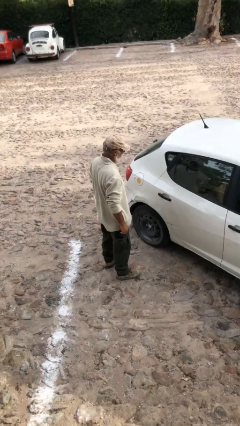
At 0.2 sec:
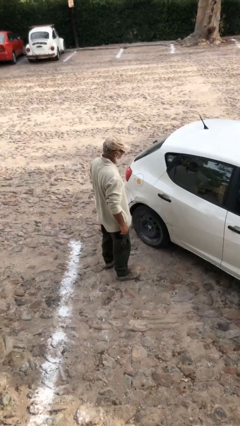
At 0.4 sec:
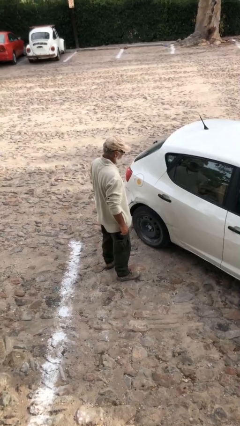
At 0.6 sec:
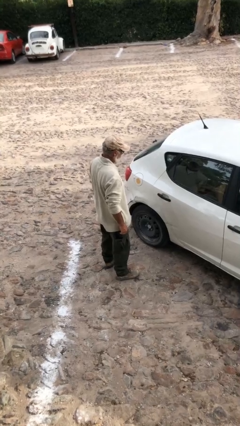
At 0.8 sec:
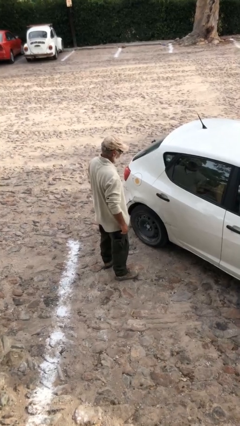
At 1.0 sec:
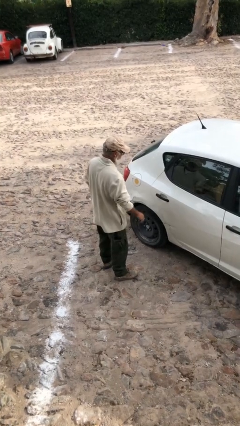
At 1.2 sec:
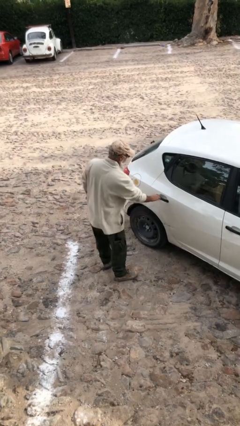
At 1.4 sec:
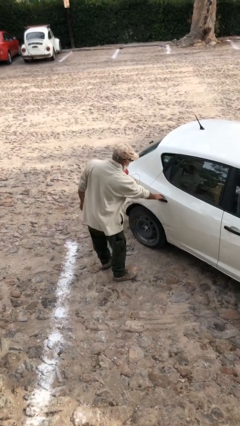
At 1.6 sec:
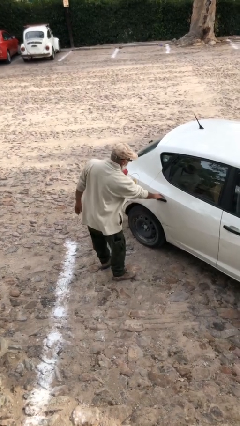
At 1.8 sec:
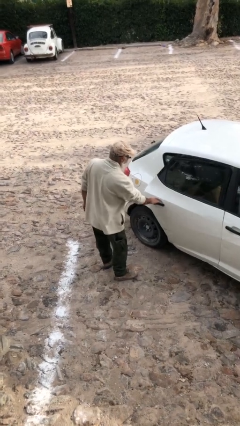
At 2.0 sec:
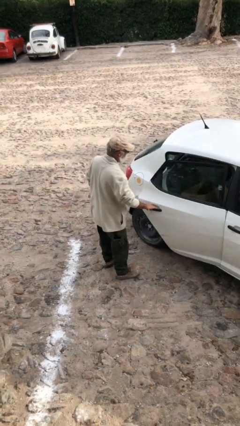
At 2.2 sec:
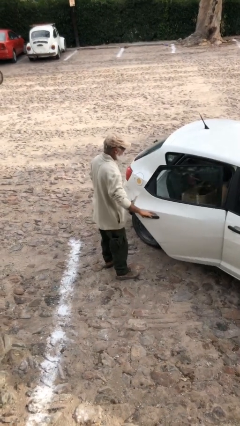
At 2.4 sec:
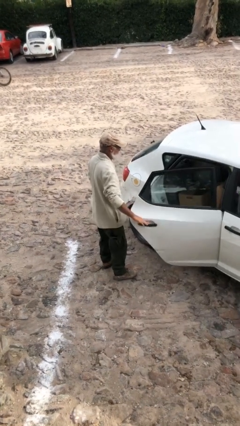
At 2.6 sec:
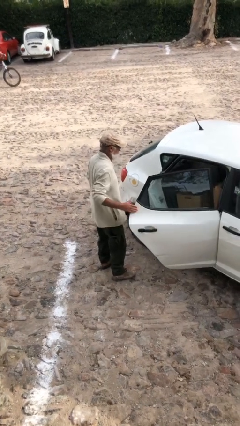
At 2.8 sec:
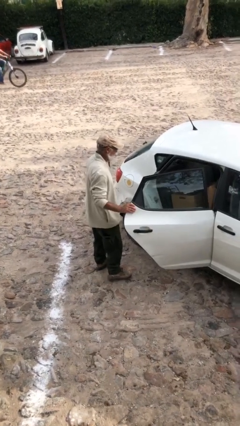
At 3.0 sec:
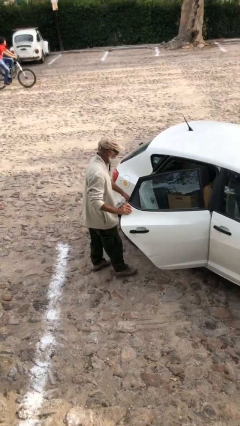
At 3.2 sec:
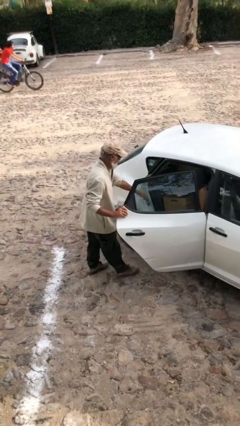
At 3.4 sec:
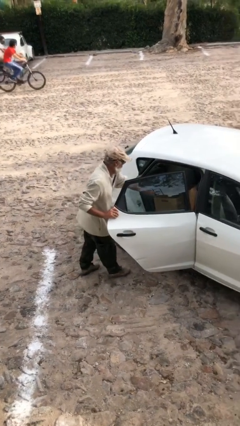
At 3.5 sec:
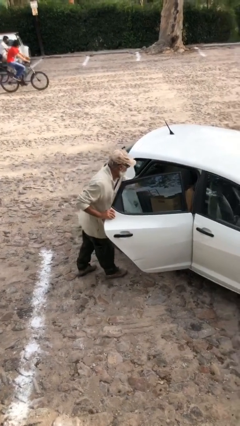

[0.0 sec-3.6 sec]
person opens car door

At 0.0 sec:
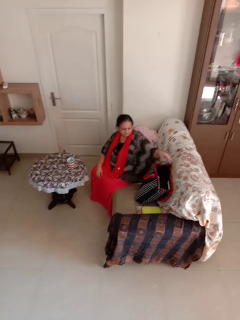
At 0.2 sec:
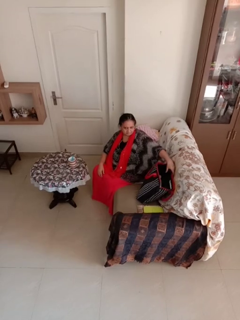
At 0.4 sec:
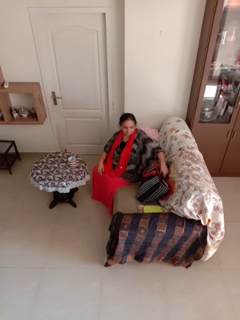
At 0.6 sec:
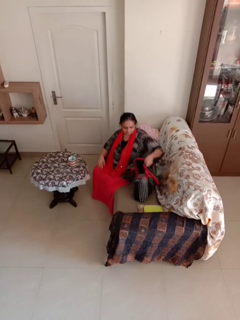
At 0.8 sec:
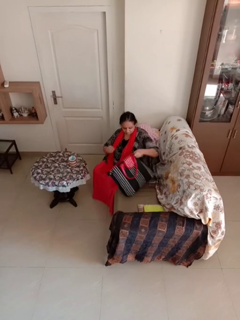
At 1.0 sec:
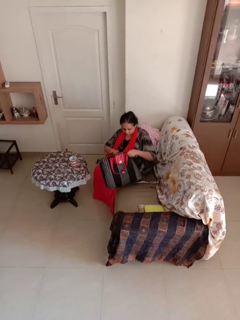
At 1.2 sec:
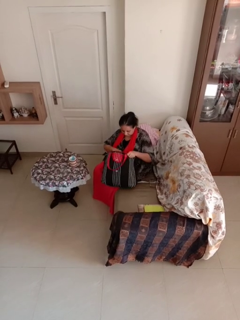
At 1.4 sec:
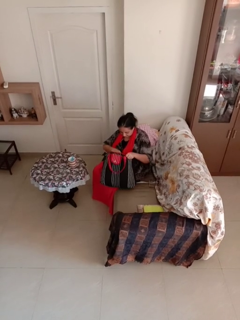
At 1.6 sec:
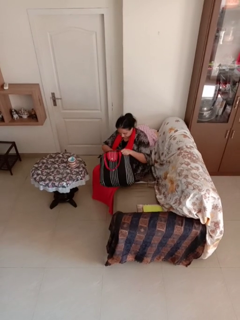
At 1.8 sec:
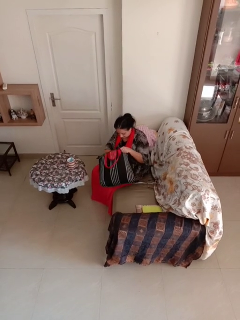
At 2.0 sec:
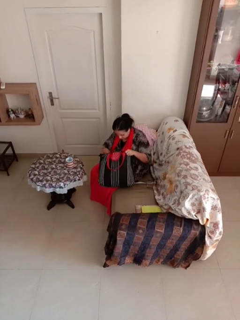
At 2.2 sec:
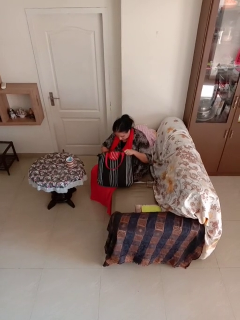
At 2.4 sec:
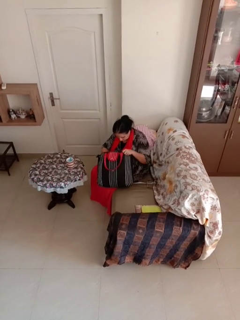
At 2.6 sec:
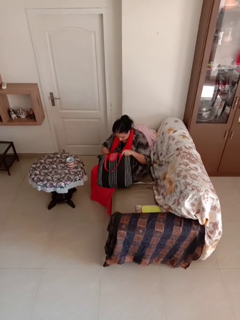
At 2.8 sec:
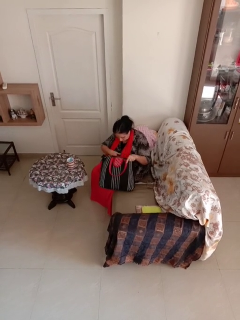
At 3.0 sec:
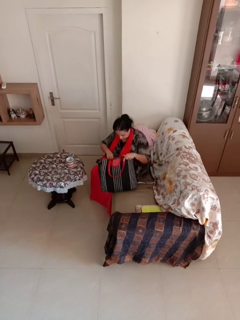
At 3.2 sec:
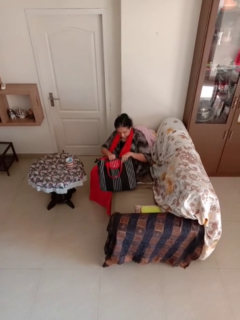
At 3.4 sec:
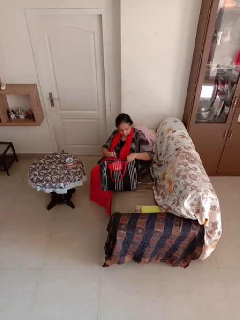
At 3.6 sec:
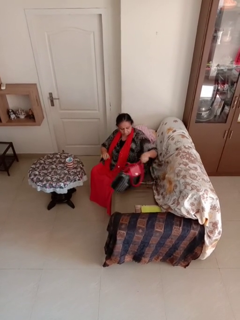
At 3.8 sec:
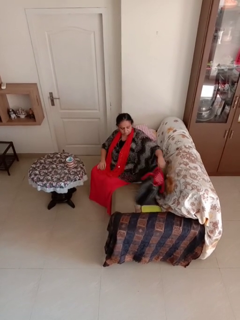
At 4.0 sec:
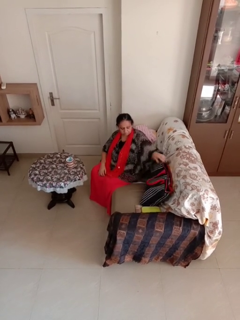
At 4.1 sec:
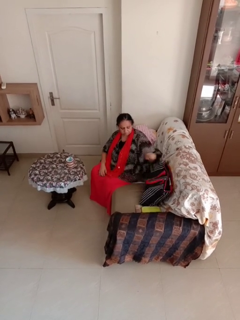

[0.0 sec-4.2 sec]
person searches in bag

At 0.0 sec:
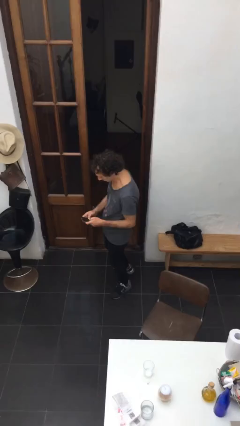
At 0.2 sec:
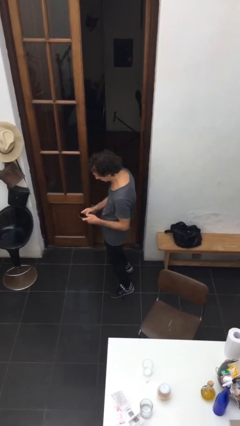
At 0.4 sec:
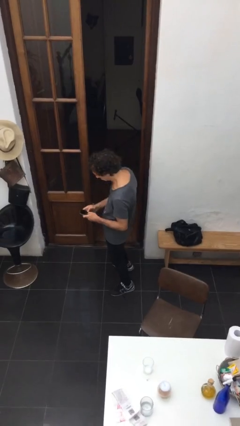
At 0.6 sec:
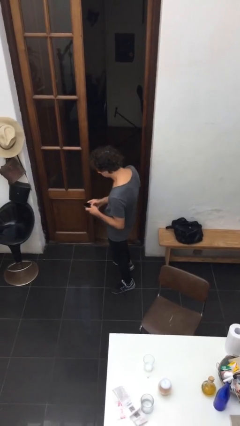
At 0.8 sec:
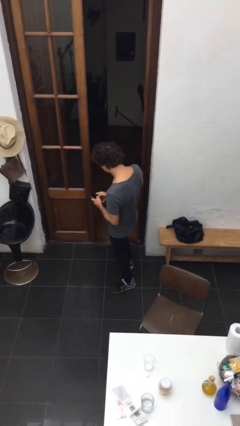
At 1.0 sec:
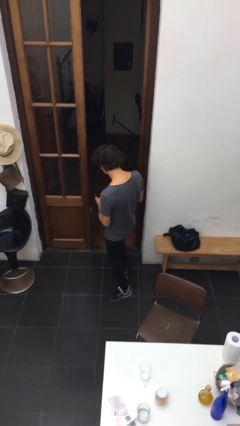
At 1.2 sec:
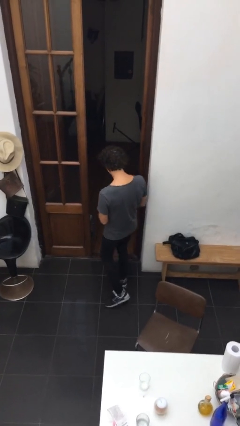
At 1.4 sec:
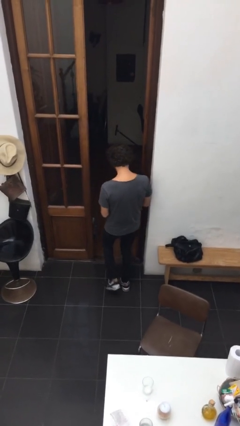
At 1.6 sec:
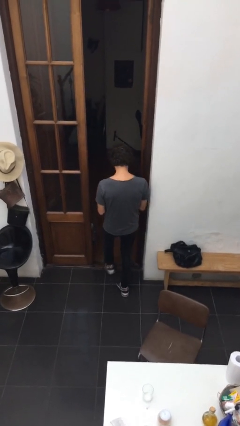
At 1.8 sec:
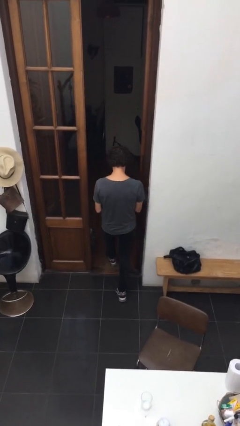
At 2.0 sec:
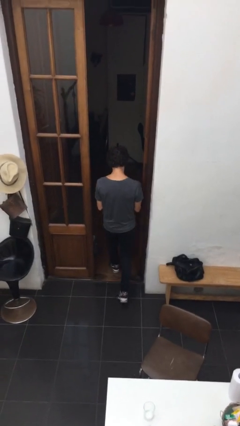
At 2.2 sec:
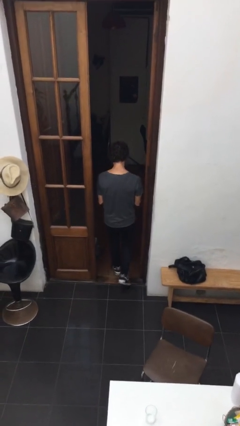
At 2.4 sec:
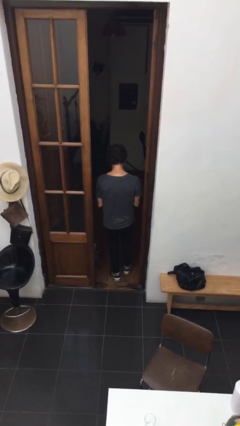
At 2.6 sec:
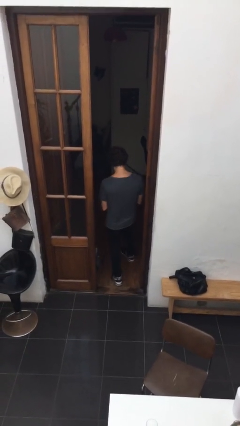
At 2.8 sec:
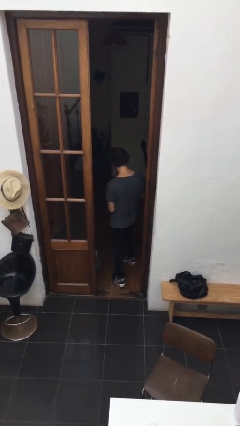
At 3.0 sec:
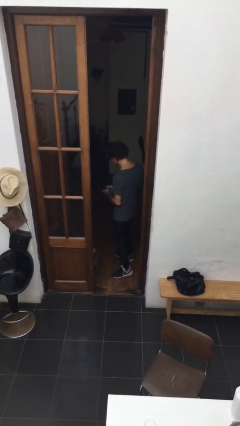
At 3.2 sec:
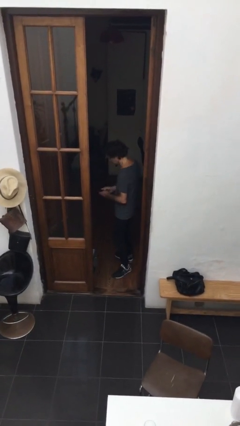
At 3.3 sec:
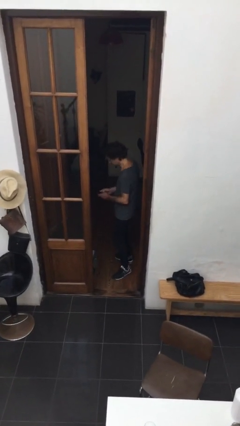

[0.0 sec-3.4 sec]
person exits scene through structure

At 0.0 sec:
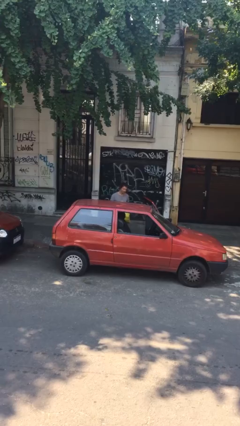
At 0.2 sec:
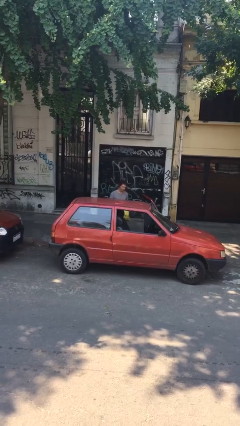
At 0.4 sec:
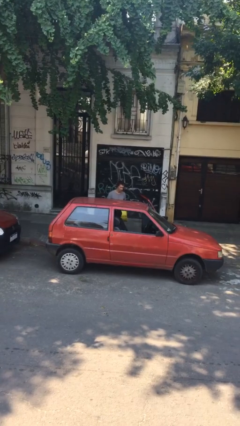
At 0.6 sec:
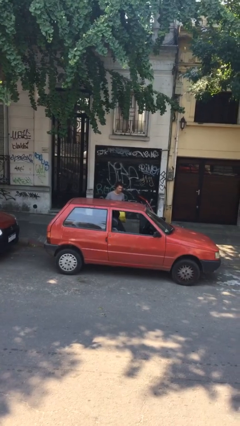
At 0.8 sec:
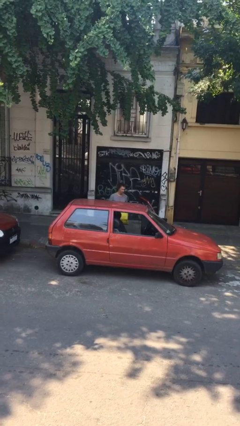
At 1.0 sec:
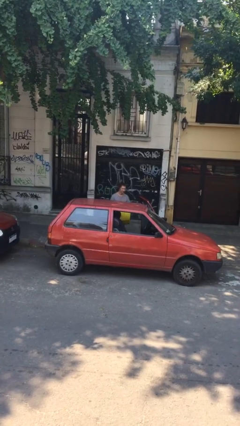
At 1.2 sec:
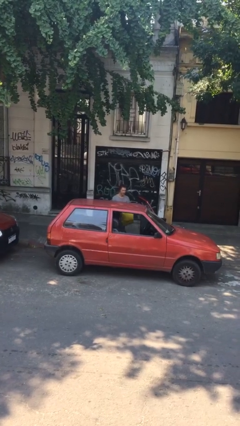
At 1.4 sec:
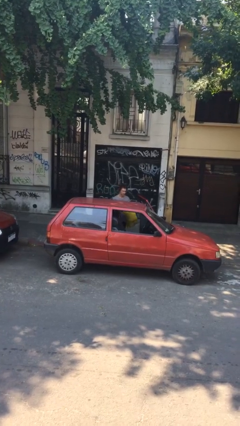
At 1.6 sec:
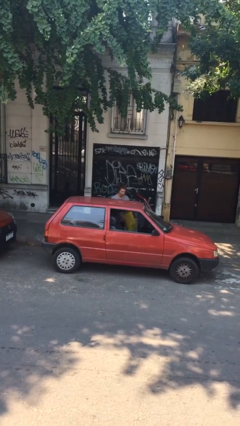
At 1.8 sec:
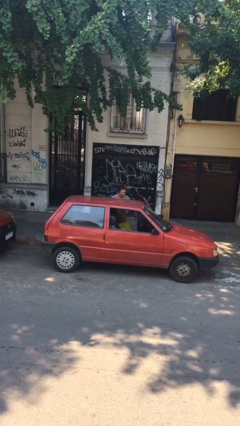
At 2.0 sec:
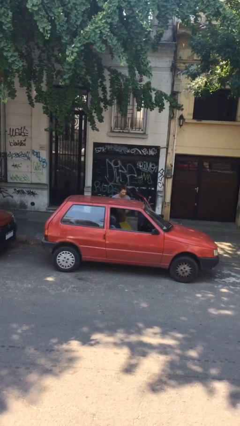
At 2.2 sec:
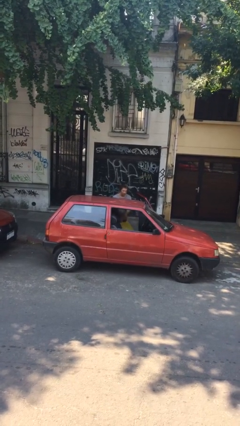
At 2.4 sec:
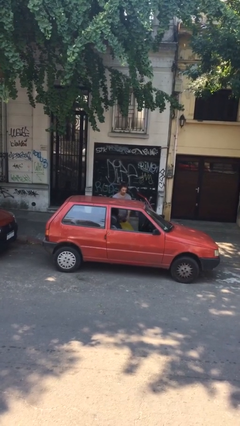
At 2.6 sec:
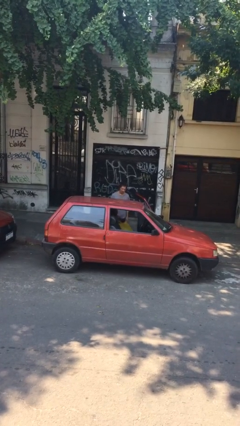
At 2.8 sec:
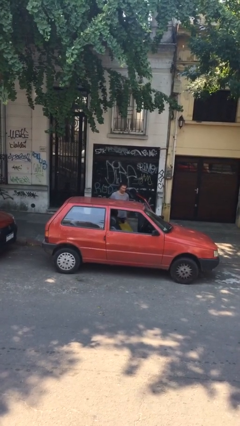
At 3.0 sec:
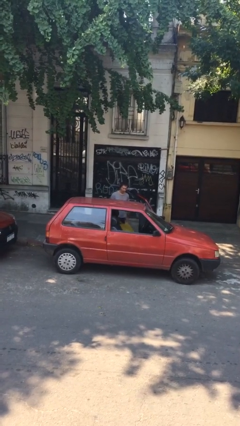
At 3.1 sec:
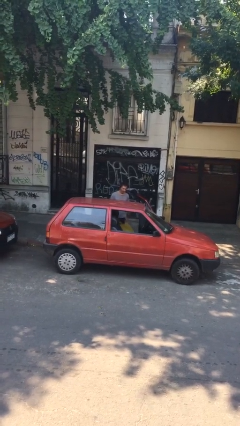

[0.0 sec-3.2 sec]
person loads car

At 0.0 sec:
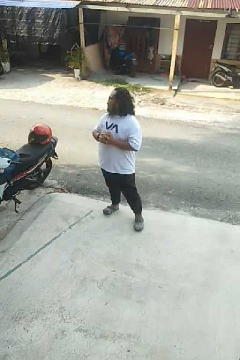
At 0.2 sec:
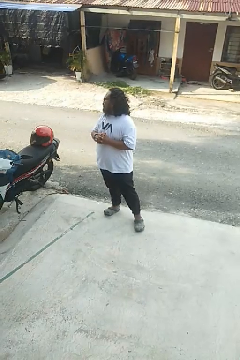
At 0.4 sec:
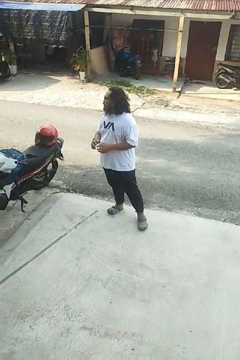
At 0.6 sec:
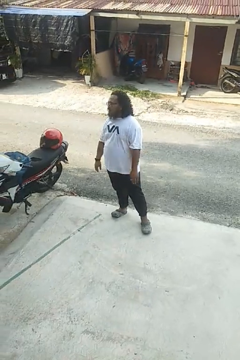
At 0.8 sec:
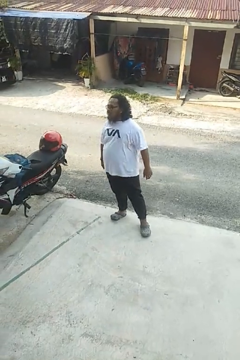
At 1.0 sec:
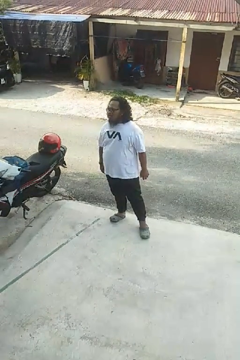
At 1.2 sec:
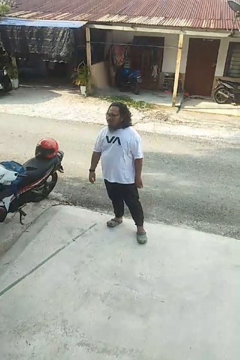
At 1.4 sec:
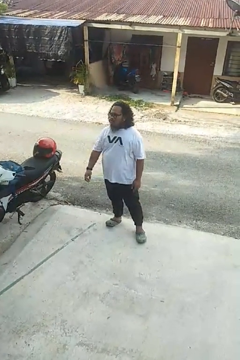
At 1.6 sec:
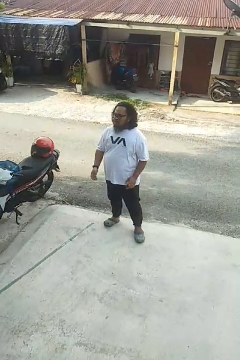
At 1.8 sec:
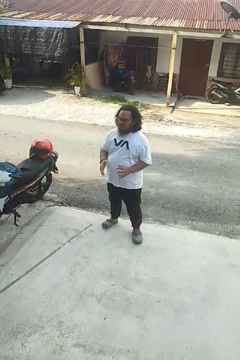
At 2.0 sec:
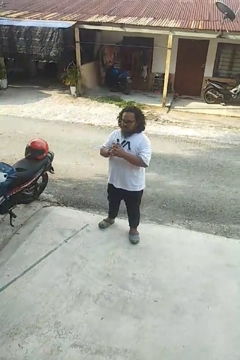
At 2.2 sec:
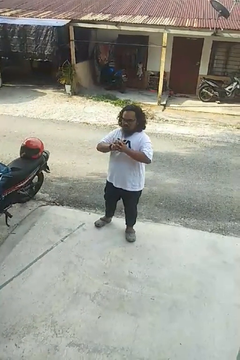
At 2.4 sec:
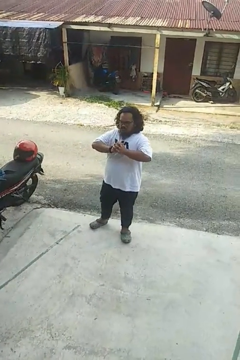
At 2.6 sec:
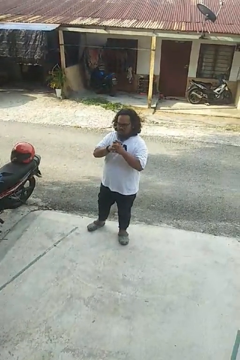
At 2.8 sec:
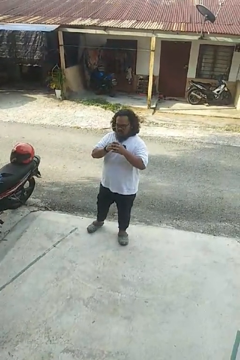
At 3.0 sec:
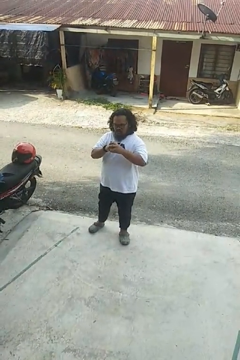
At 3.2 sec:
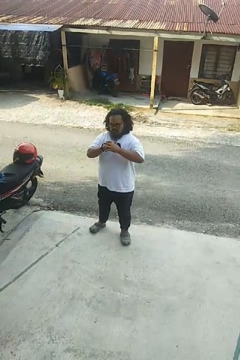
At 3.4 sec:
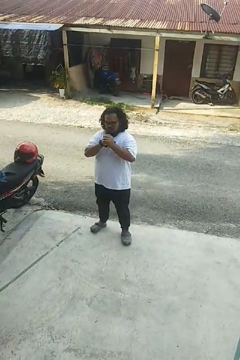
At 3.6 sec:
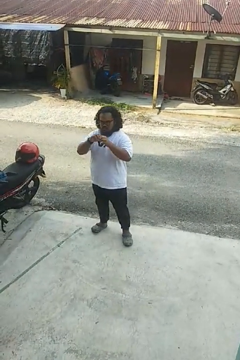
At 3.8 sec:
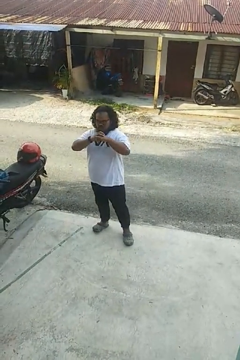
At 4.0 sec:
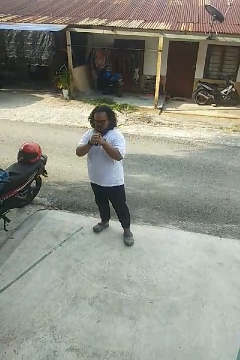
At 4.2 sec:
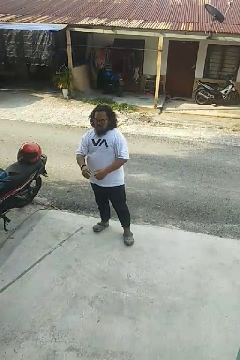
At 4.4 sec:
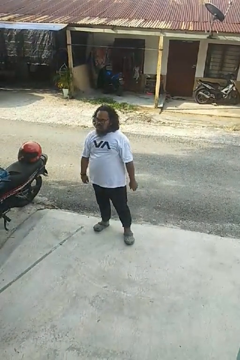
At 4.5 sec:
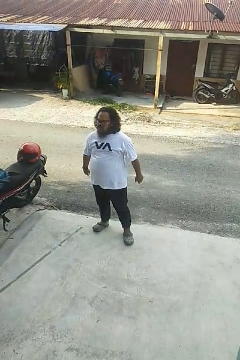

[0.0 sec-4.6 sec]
person cracks knuckles

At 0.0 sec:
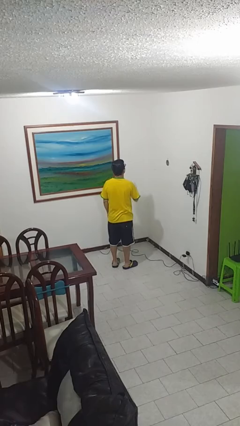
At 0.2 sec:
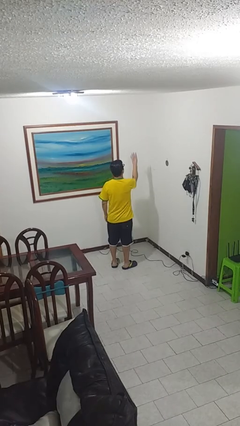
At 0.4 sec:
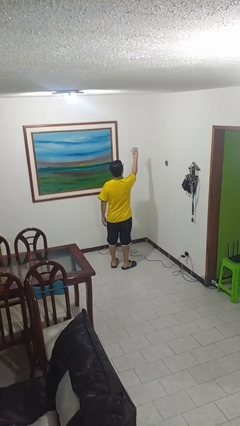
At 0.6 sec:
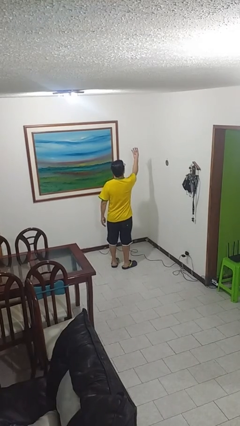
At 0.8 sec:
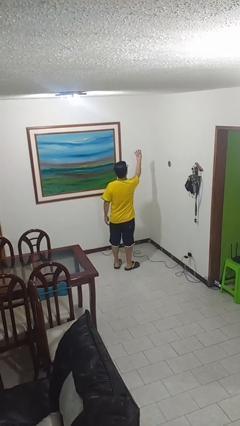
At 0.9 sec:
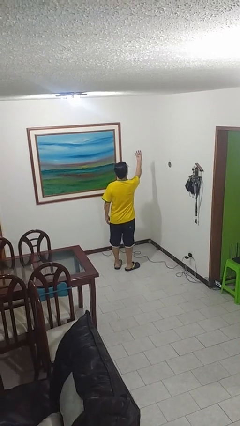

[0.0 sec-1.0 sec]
person gestures number four
